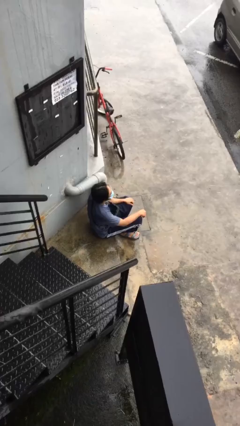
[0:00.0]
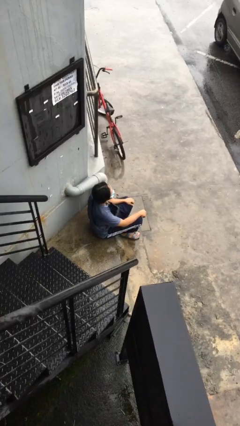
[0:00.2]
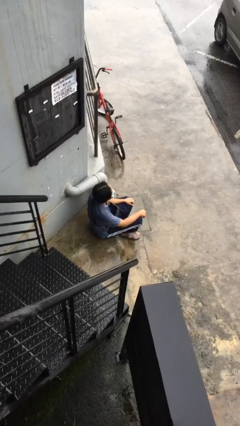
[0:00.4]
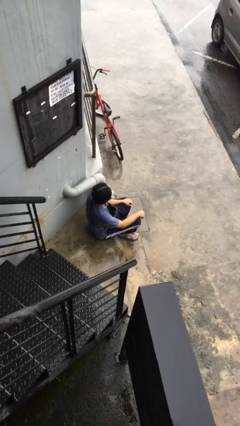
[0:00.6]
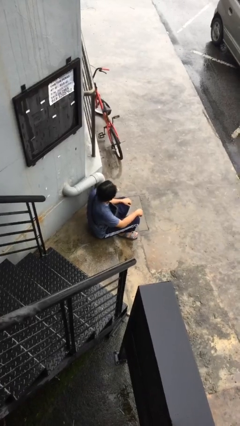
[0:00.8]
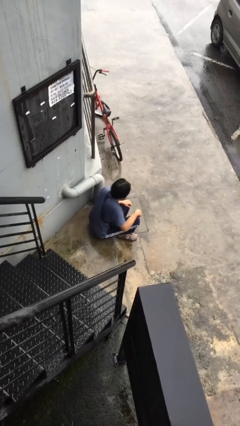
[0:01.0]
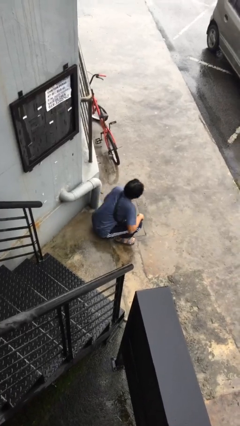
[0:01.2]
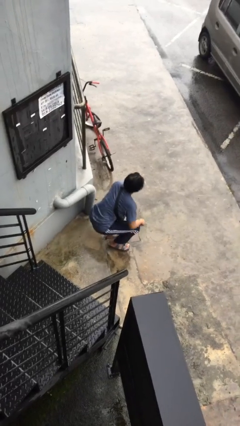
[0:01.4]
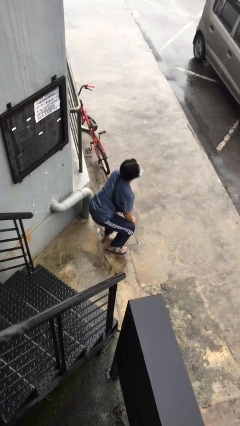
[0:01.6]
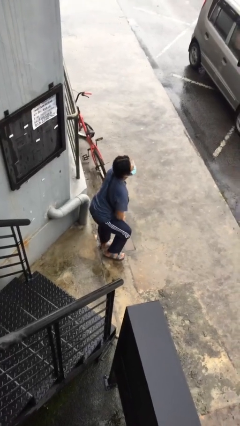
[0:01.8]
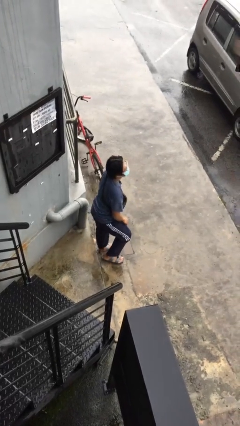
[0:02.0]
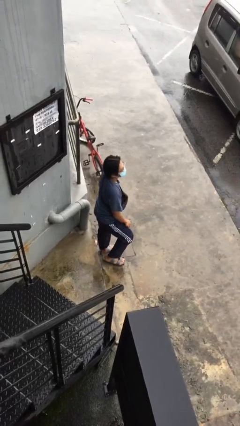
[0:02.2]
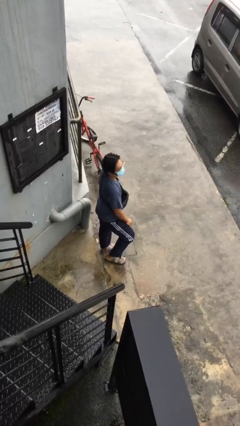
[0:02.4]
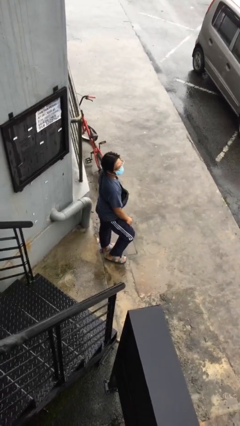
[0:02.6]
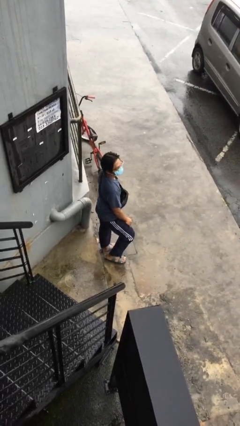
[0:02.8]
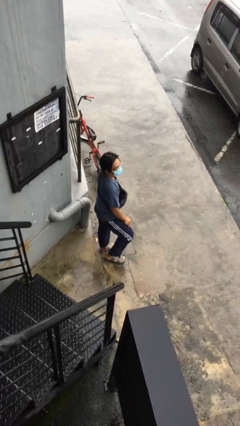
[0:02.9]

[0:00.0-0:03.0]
person stands up

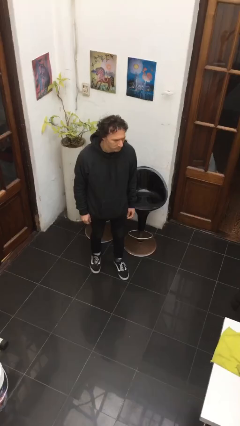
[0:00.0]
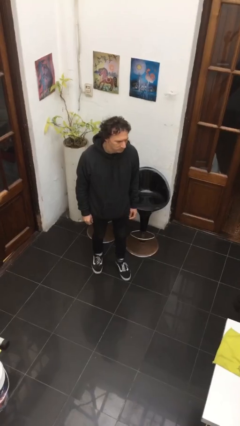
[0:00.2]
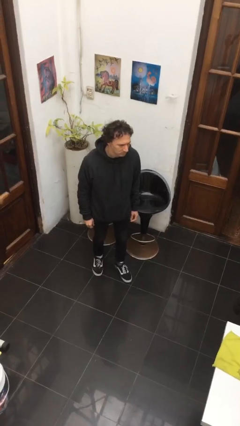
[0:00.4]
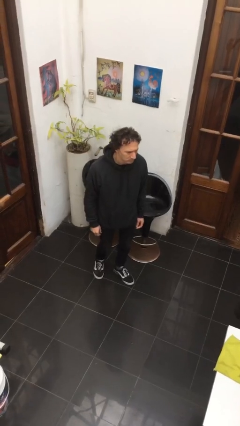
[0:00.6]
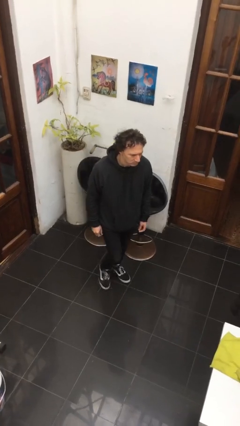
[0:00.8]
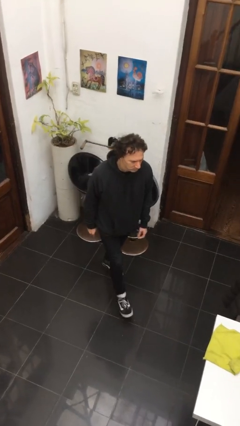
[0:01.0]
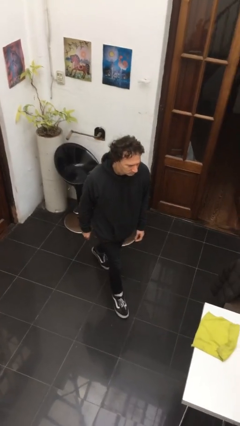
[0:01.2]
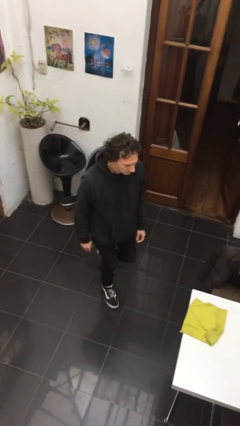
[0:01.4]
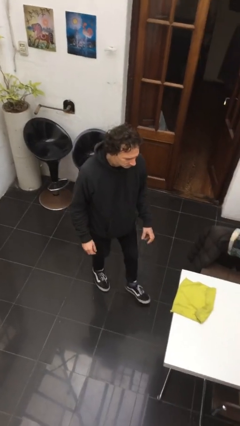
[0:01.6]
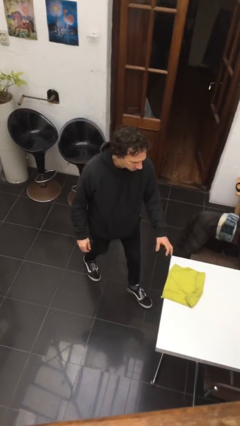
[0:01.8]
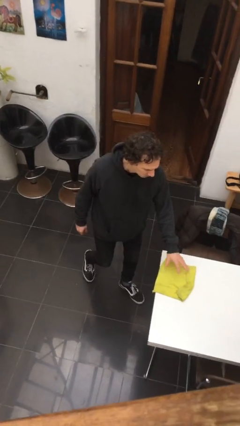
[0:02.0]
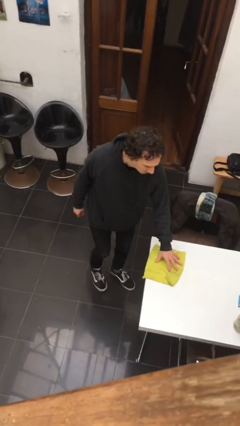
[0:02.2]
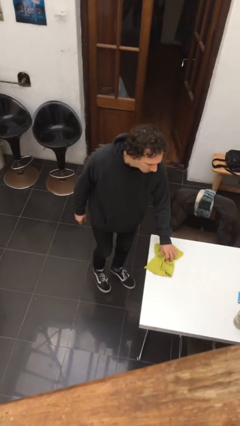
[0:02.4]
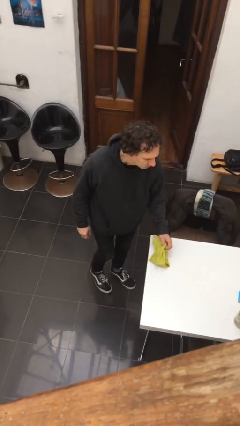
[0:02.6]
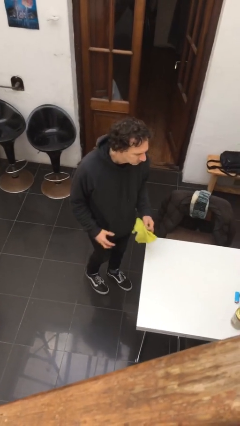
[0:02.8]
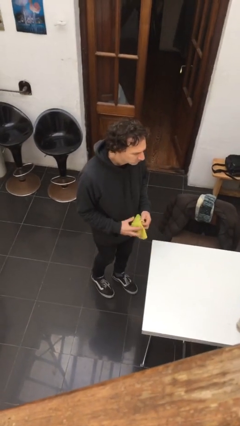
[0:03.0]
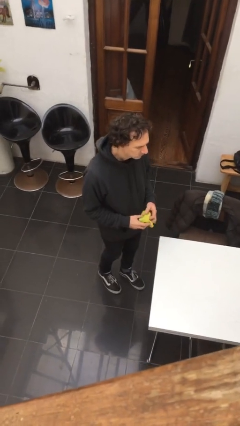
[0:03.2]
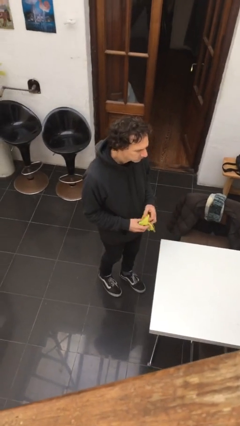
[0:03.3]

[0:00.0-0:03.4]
person picks up object from table

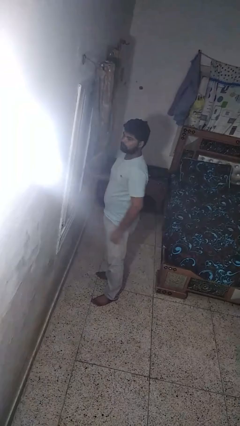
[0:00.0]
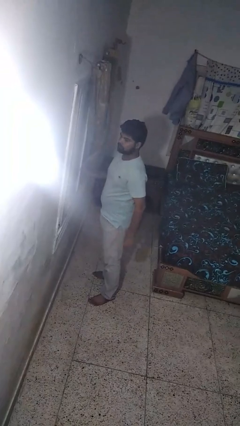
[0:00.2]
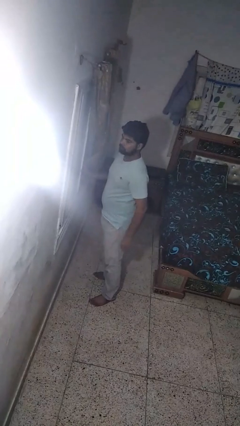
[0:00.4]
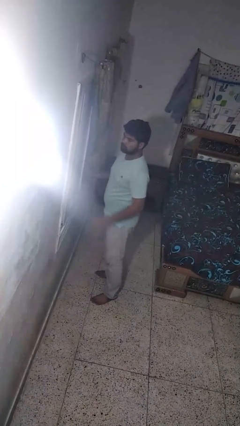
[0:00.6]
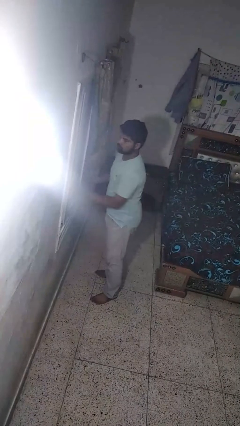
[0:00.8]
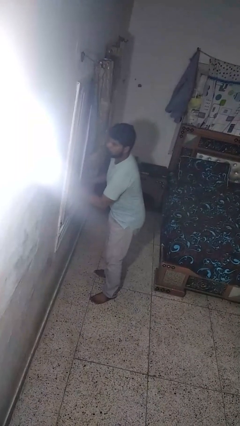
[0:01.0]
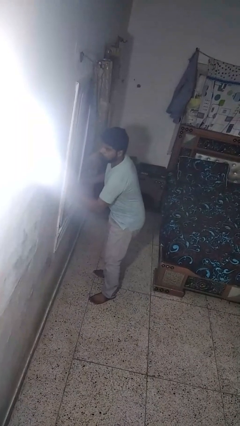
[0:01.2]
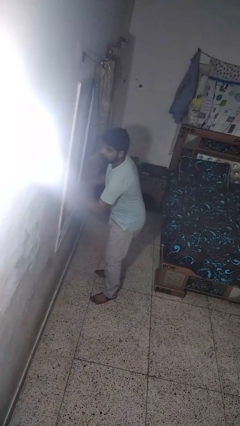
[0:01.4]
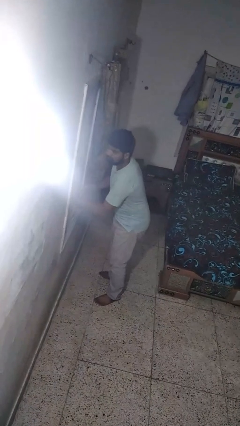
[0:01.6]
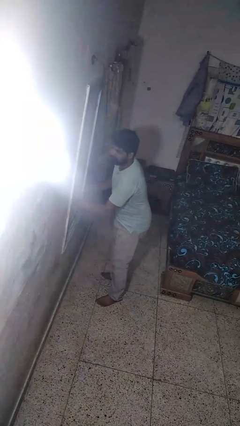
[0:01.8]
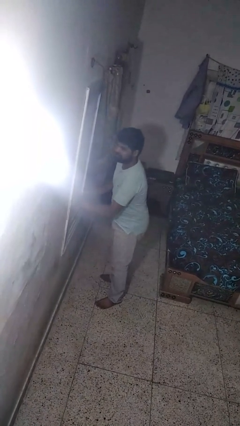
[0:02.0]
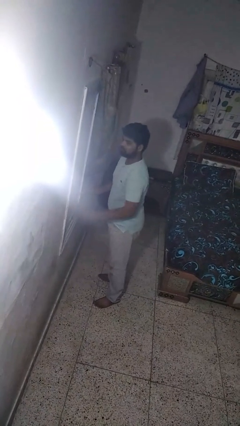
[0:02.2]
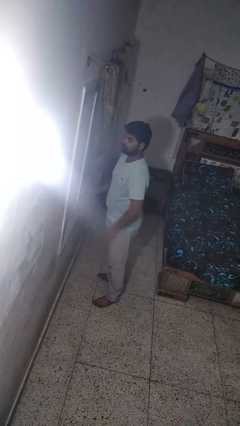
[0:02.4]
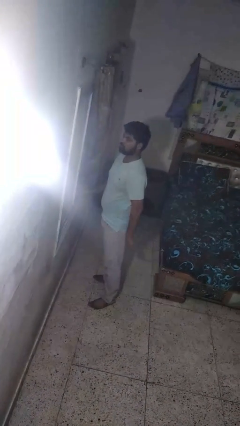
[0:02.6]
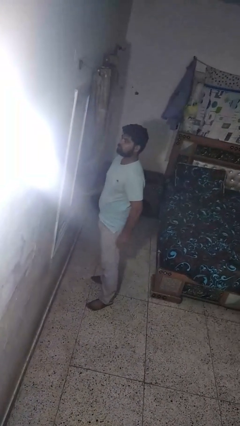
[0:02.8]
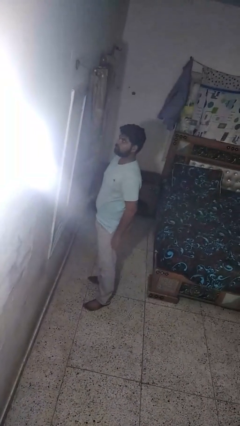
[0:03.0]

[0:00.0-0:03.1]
person closes sliding door

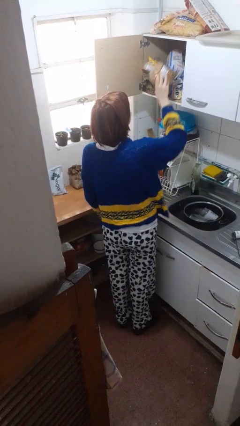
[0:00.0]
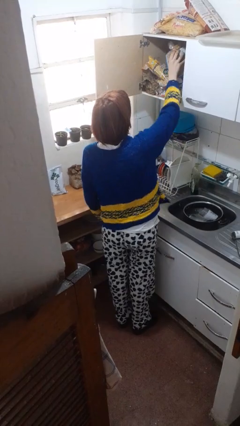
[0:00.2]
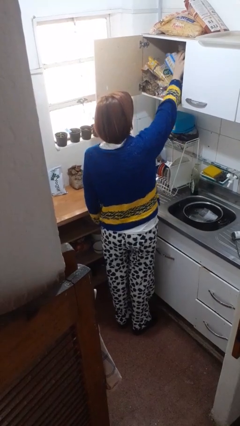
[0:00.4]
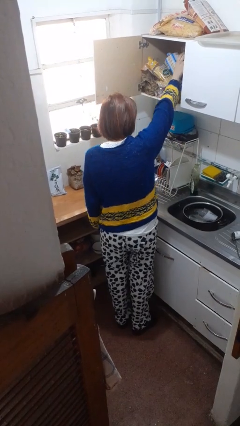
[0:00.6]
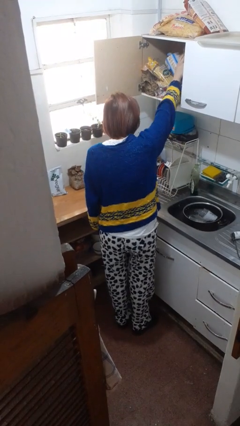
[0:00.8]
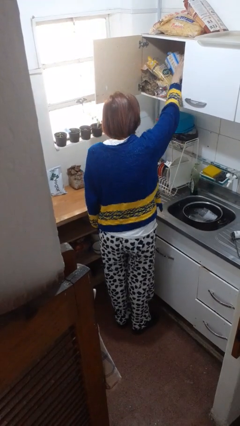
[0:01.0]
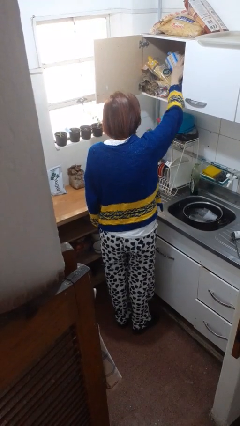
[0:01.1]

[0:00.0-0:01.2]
person puts object in cabinet

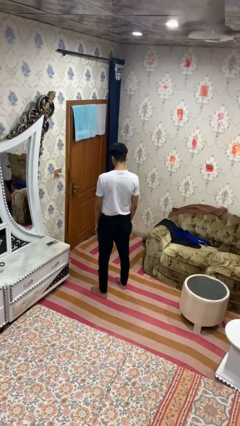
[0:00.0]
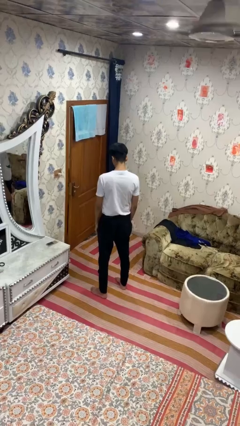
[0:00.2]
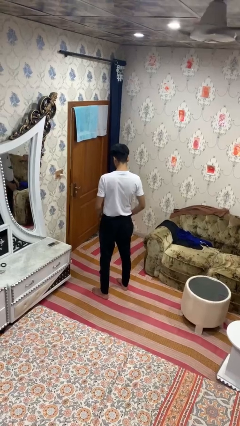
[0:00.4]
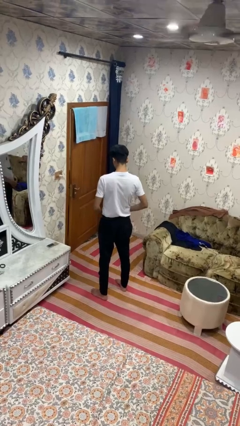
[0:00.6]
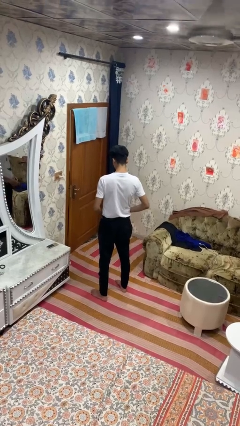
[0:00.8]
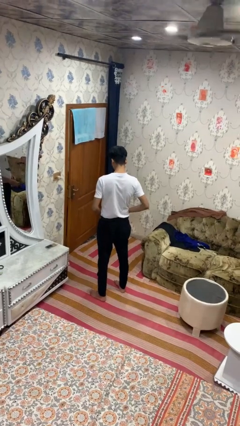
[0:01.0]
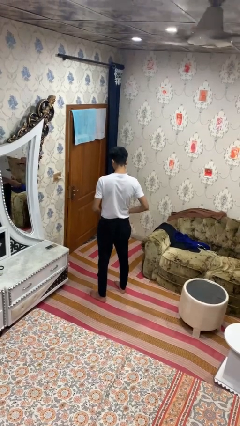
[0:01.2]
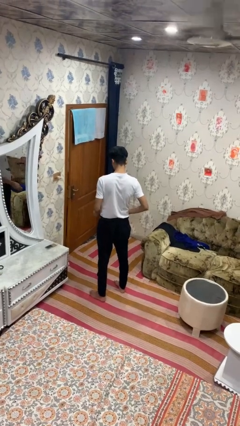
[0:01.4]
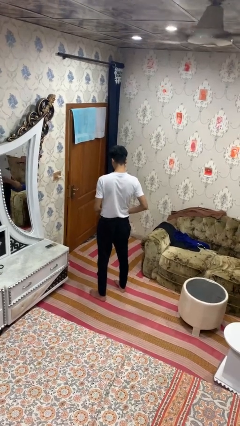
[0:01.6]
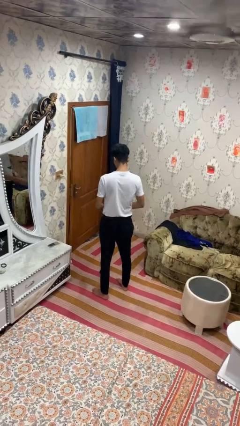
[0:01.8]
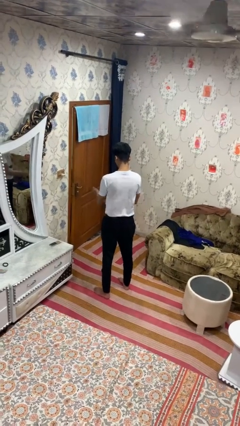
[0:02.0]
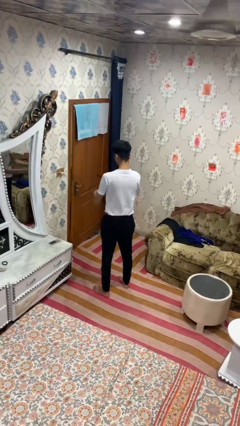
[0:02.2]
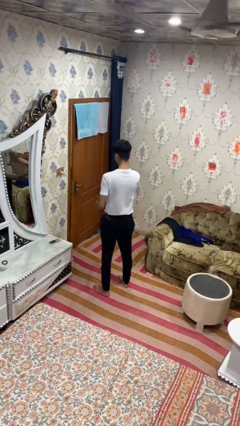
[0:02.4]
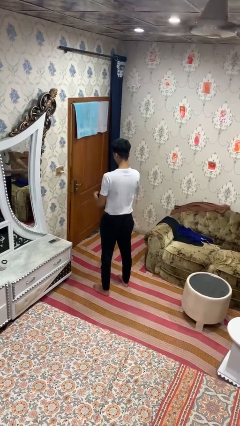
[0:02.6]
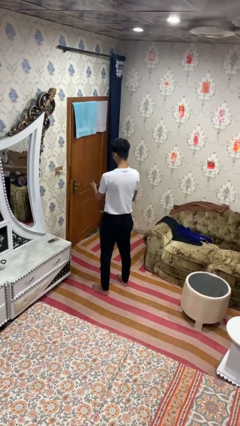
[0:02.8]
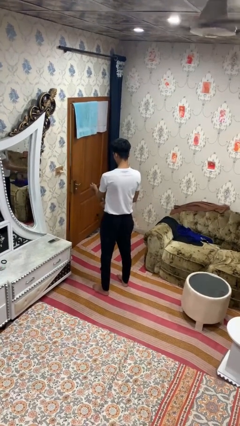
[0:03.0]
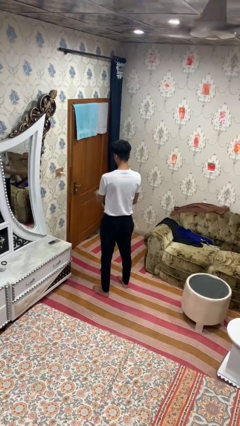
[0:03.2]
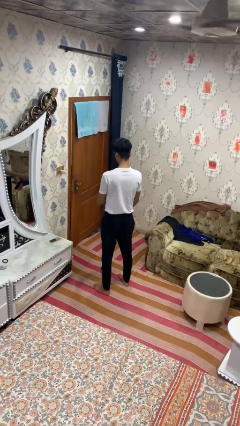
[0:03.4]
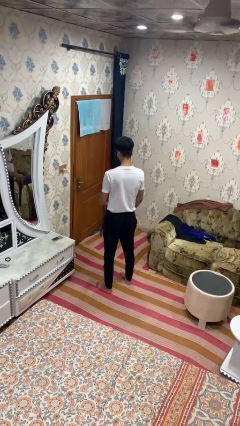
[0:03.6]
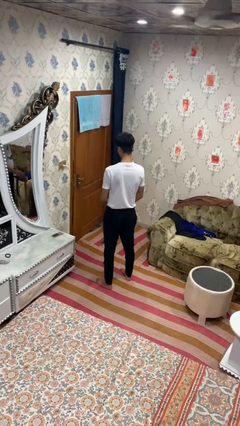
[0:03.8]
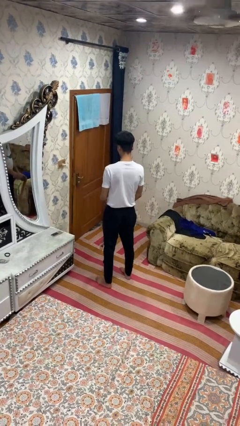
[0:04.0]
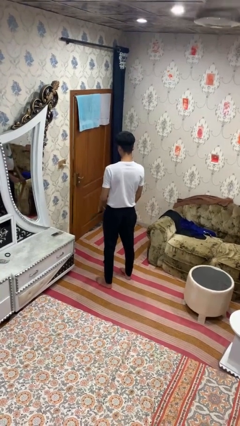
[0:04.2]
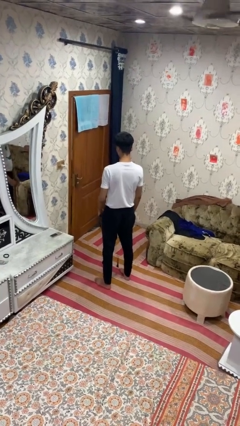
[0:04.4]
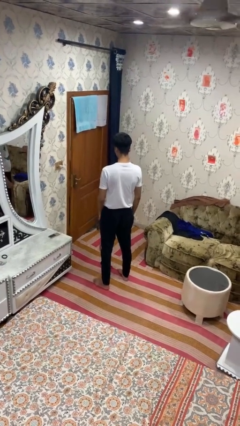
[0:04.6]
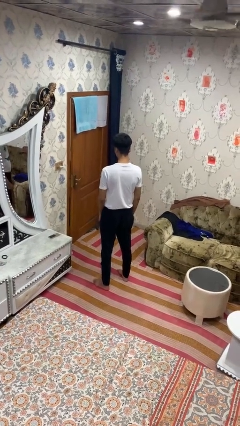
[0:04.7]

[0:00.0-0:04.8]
person takes off belt

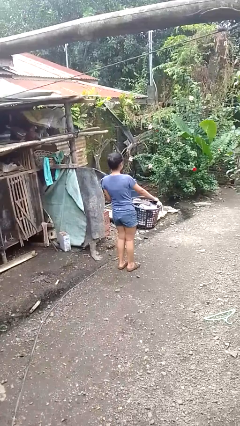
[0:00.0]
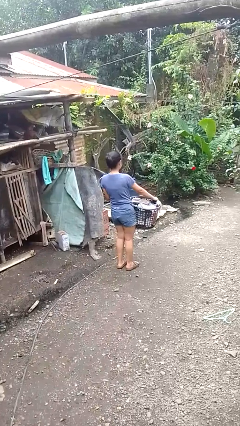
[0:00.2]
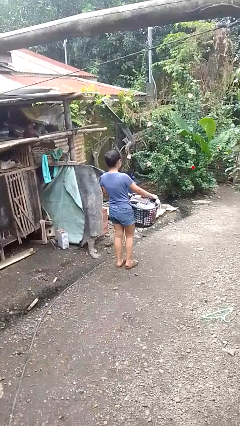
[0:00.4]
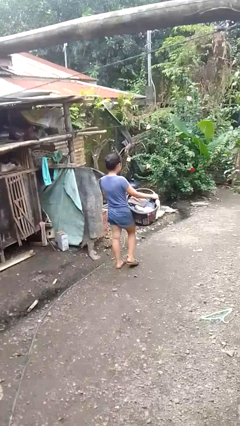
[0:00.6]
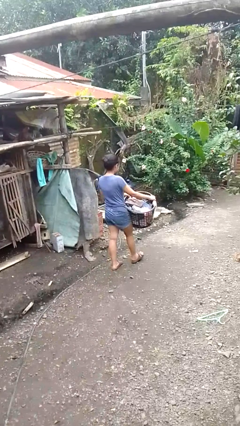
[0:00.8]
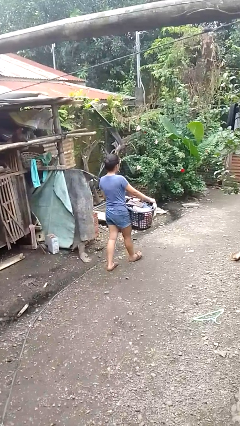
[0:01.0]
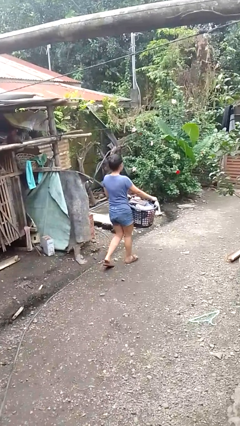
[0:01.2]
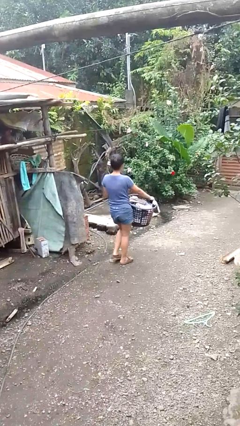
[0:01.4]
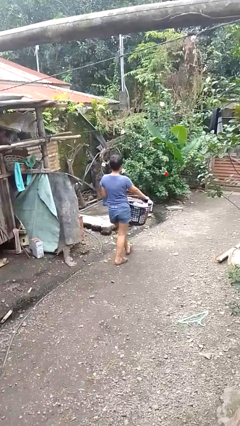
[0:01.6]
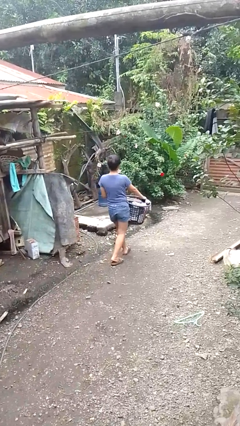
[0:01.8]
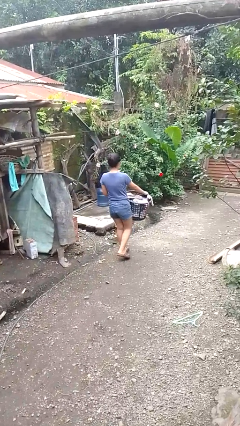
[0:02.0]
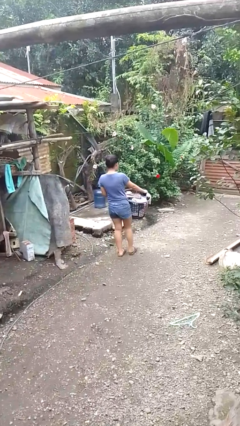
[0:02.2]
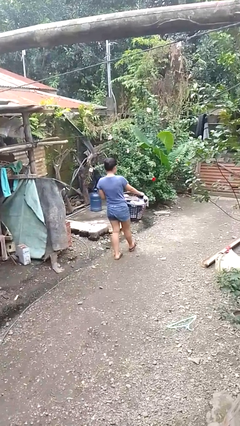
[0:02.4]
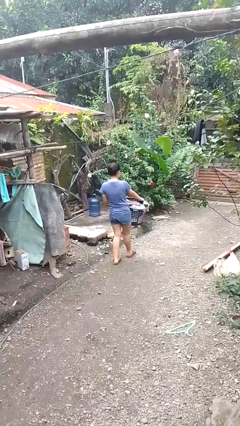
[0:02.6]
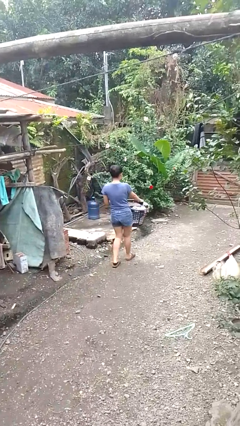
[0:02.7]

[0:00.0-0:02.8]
person carries laundry basket
